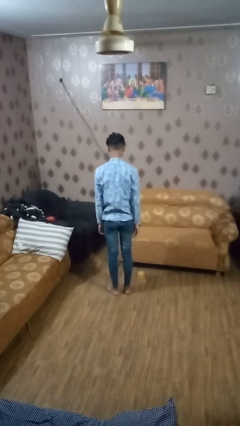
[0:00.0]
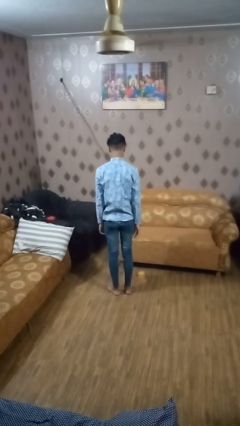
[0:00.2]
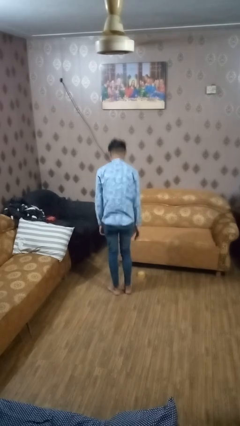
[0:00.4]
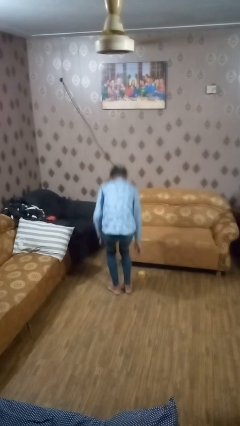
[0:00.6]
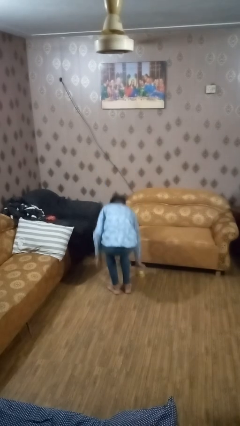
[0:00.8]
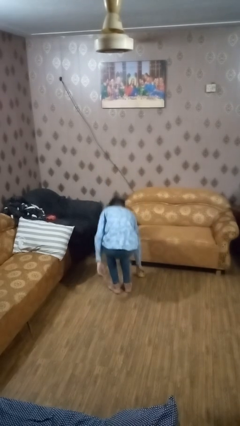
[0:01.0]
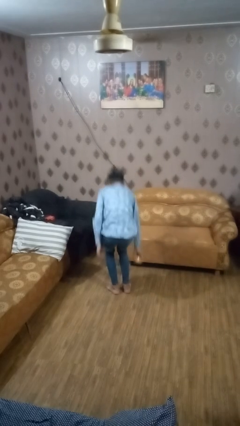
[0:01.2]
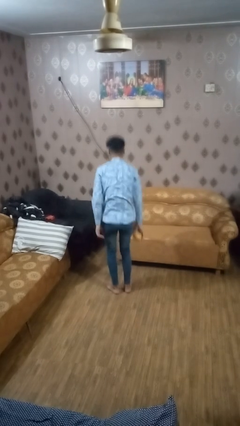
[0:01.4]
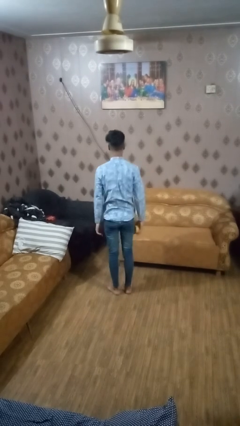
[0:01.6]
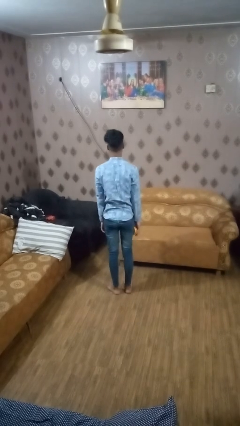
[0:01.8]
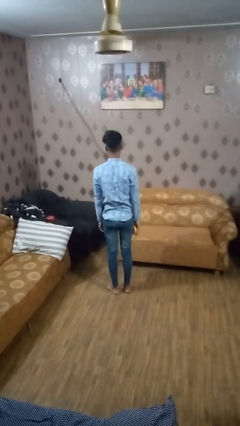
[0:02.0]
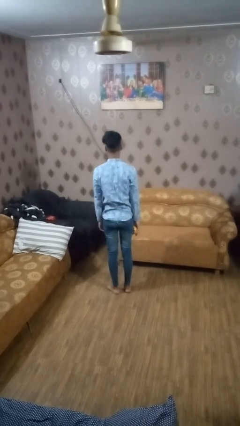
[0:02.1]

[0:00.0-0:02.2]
person picks up object from floor

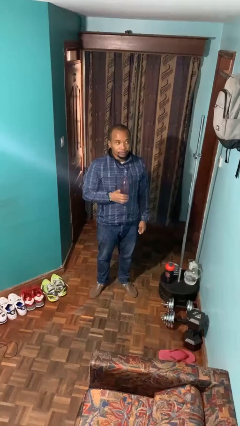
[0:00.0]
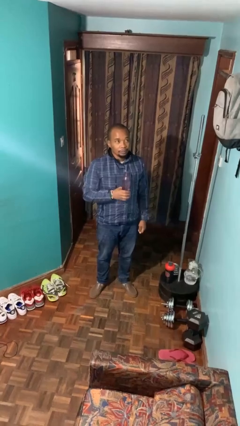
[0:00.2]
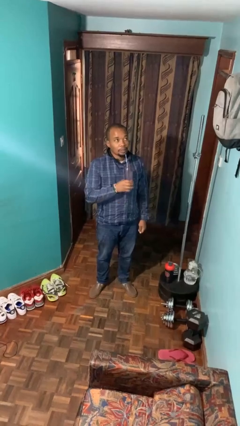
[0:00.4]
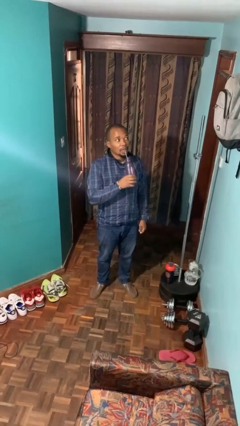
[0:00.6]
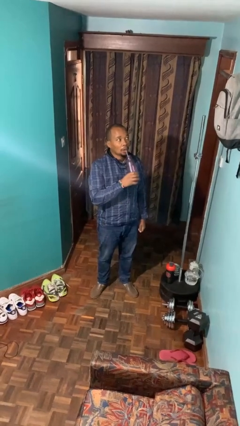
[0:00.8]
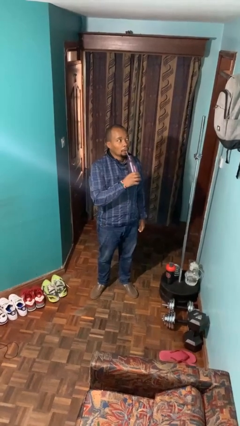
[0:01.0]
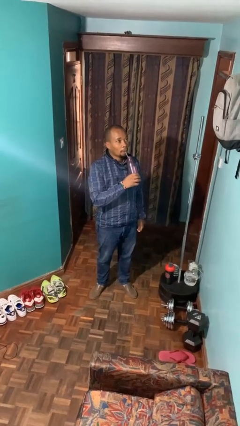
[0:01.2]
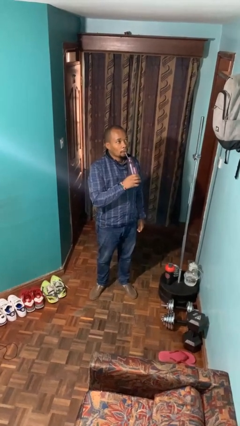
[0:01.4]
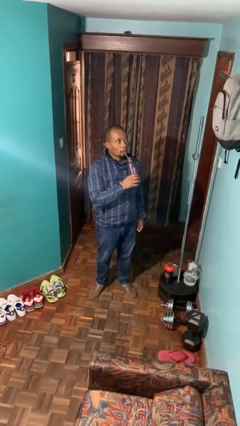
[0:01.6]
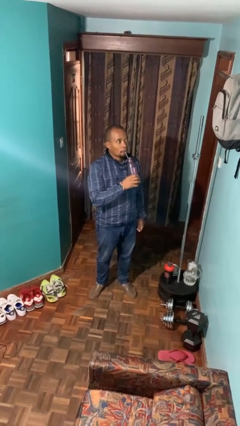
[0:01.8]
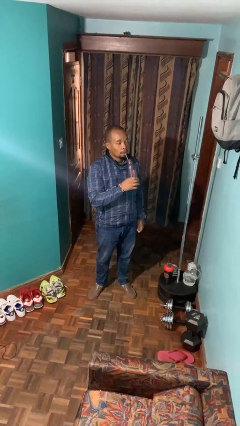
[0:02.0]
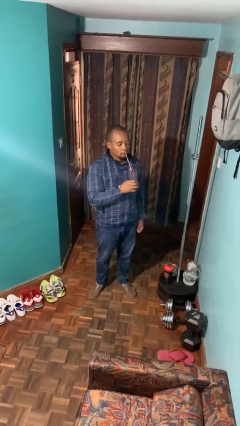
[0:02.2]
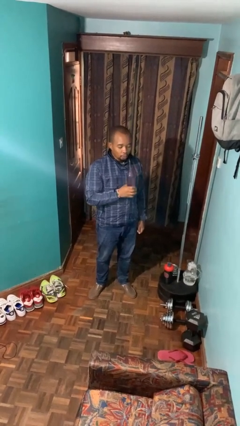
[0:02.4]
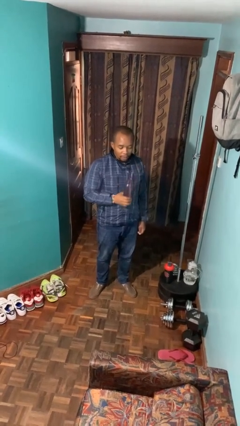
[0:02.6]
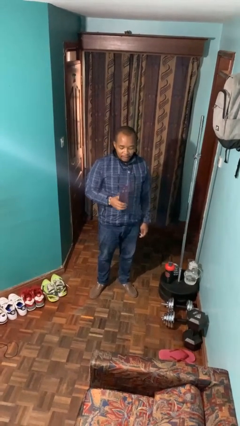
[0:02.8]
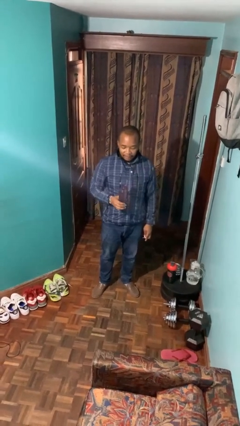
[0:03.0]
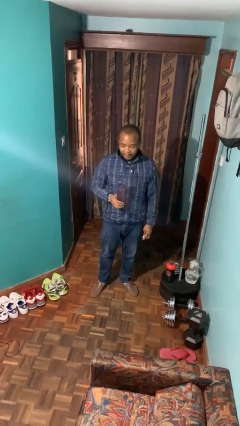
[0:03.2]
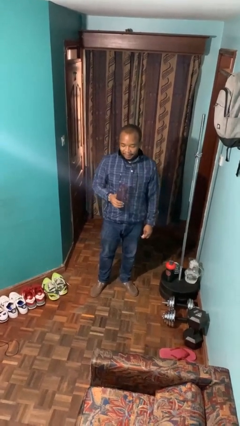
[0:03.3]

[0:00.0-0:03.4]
person drinks from straw

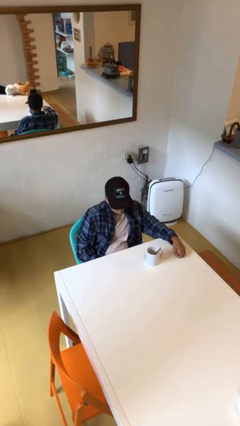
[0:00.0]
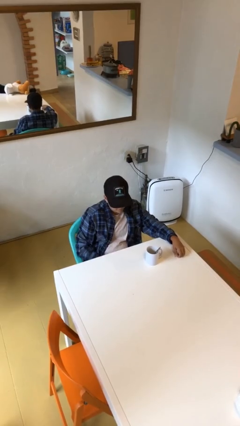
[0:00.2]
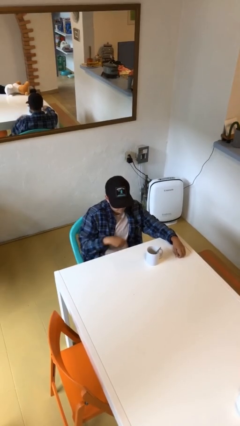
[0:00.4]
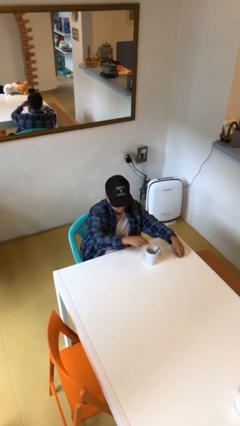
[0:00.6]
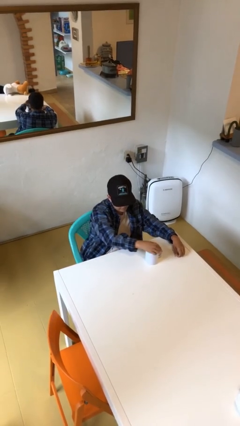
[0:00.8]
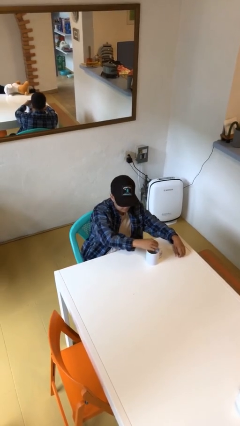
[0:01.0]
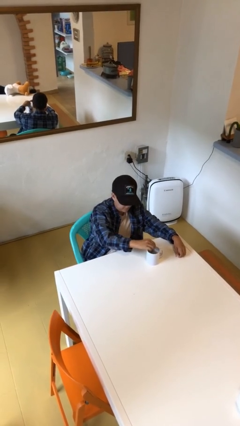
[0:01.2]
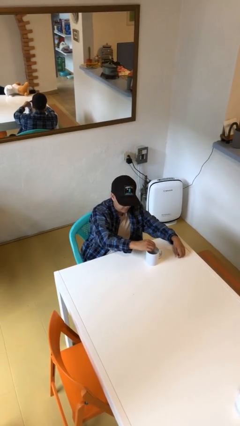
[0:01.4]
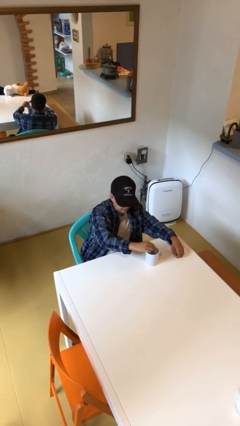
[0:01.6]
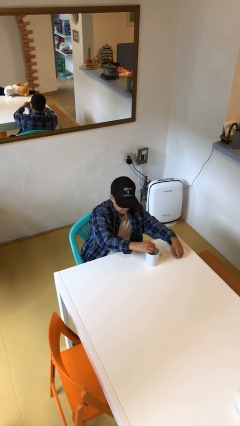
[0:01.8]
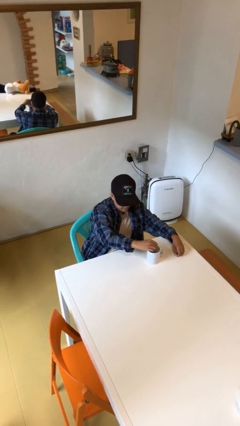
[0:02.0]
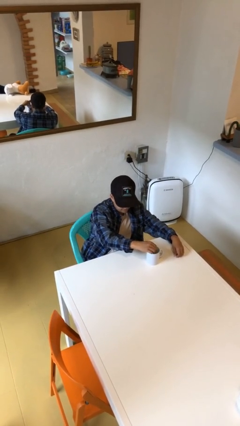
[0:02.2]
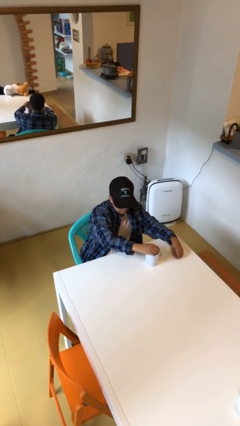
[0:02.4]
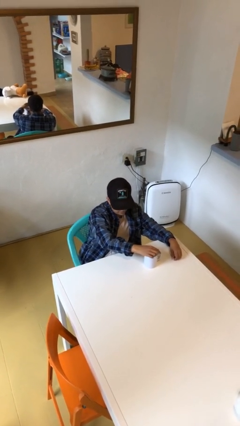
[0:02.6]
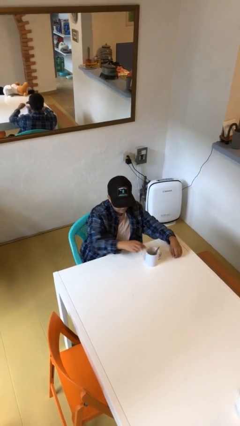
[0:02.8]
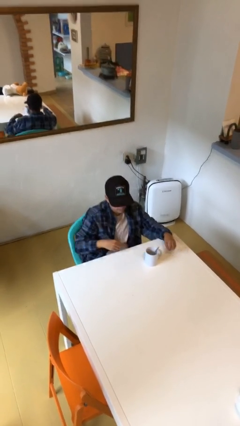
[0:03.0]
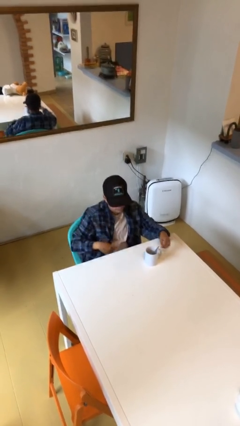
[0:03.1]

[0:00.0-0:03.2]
person stirs mug

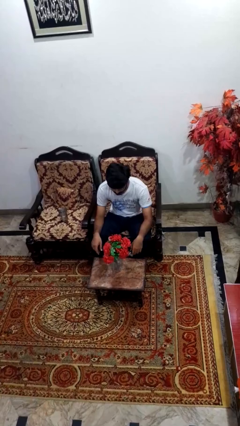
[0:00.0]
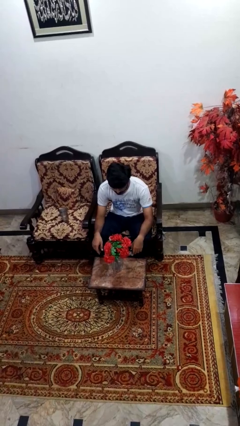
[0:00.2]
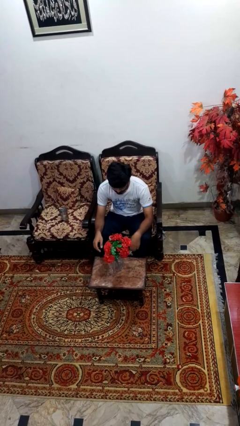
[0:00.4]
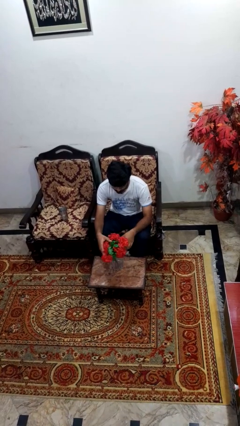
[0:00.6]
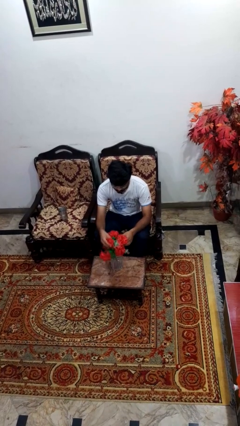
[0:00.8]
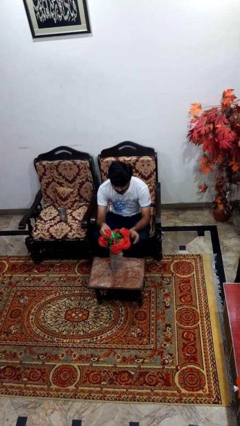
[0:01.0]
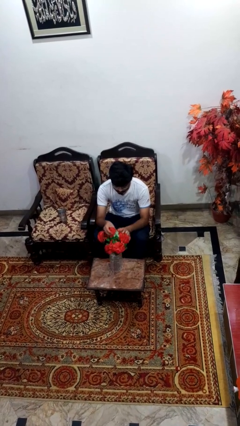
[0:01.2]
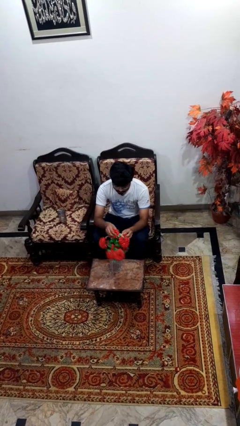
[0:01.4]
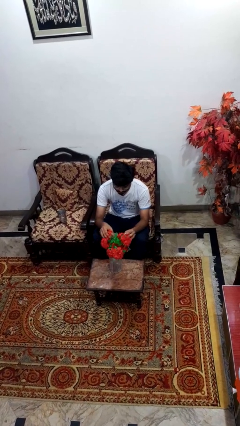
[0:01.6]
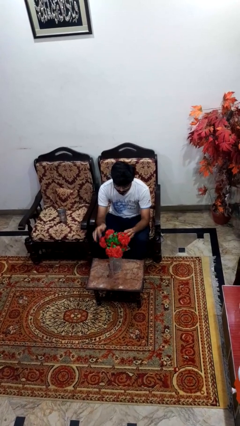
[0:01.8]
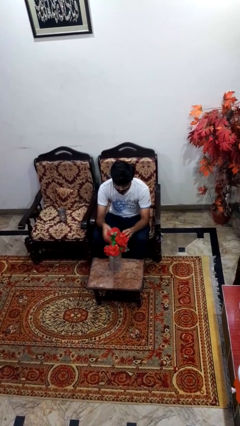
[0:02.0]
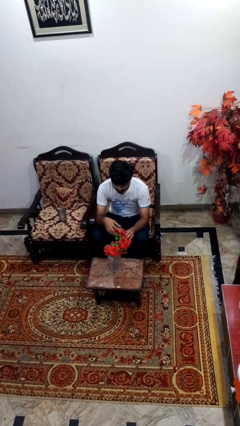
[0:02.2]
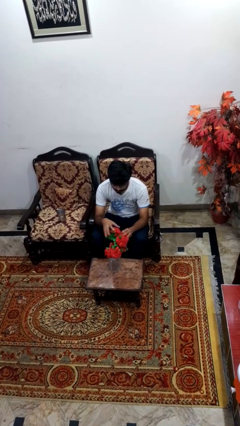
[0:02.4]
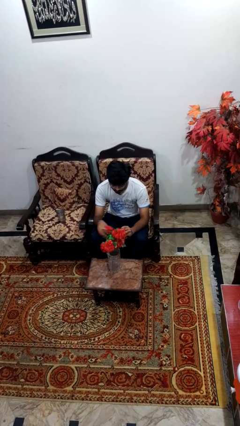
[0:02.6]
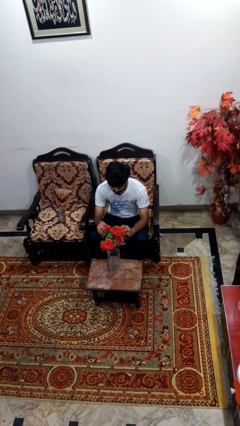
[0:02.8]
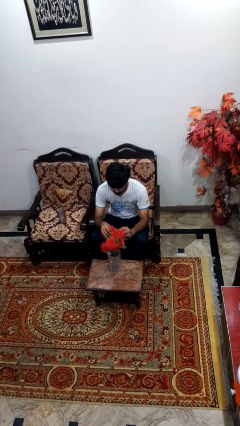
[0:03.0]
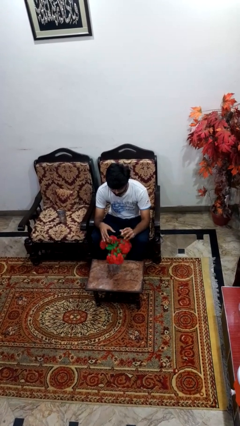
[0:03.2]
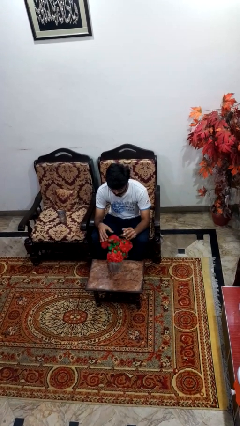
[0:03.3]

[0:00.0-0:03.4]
person arranges flowers in vase

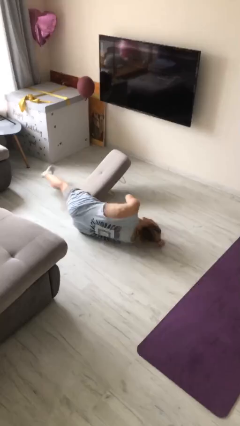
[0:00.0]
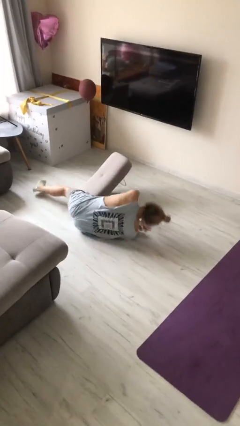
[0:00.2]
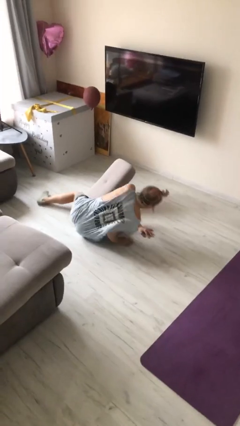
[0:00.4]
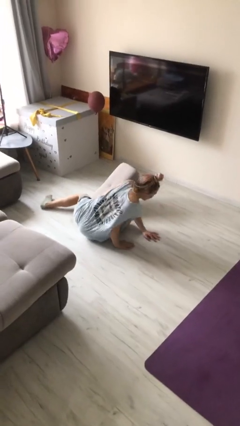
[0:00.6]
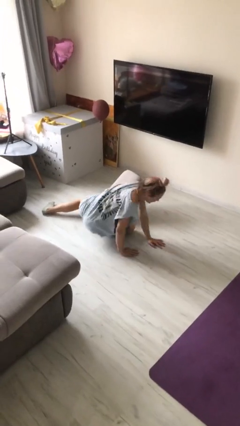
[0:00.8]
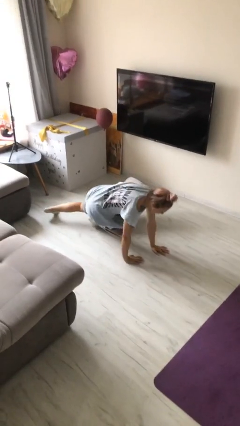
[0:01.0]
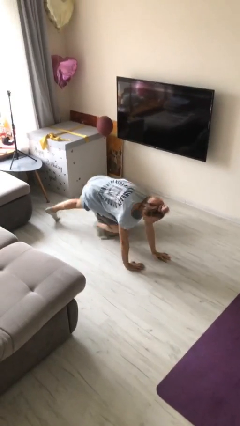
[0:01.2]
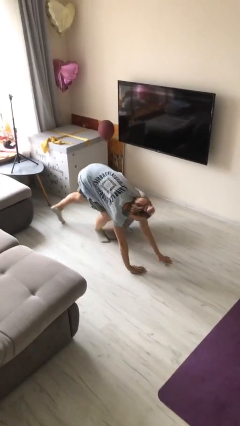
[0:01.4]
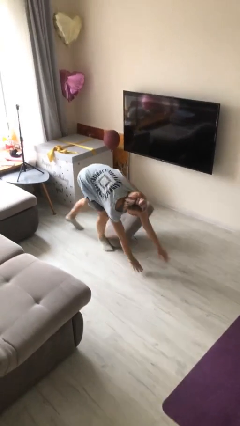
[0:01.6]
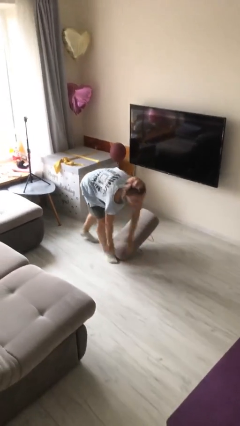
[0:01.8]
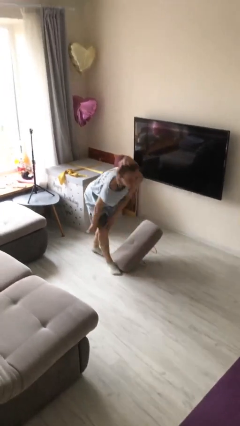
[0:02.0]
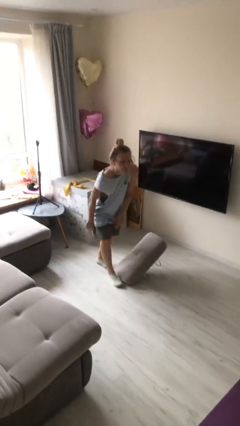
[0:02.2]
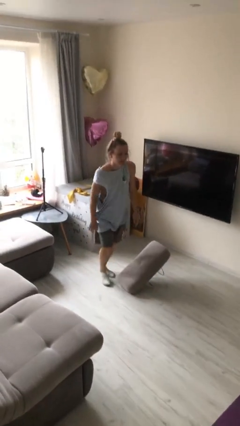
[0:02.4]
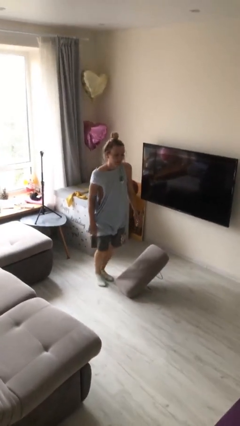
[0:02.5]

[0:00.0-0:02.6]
person stands up from floor

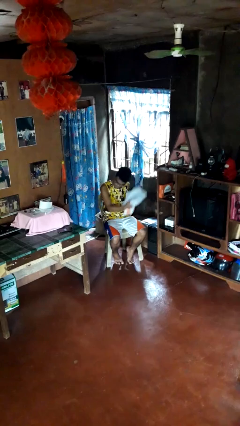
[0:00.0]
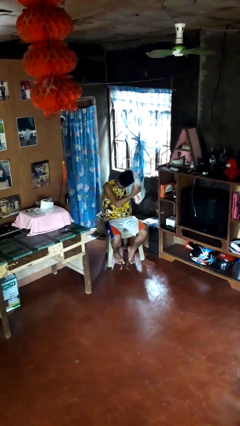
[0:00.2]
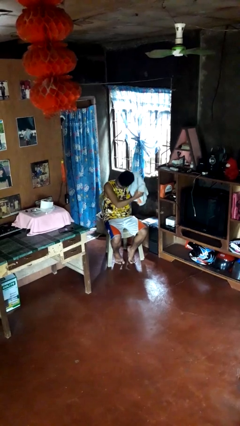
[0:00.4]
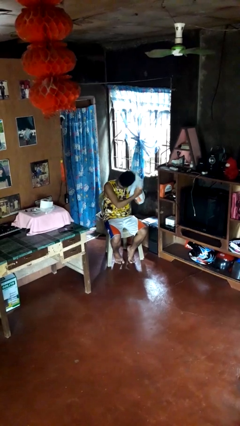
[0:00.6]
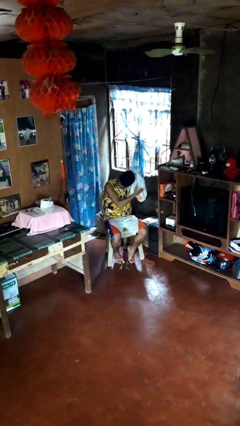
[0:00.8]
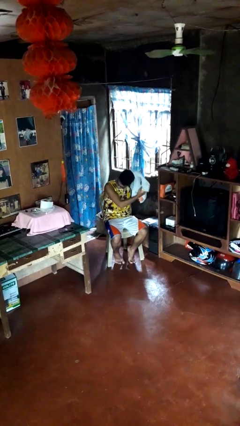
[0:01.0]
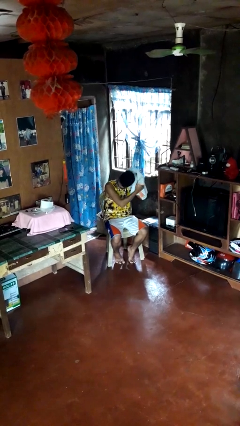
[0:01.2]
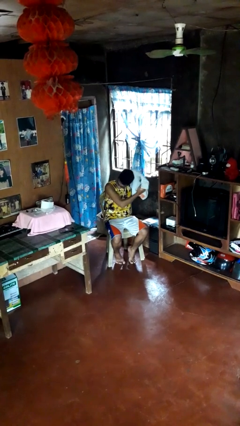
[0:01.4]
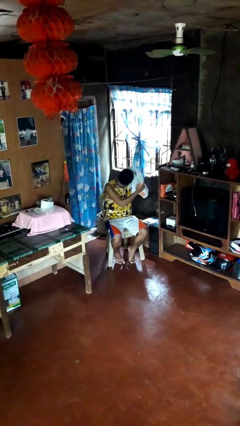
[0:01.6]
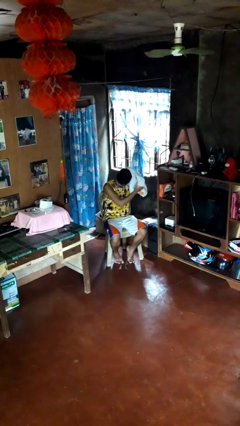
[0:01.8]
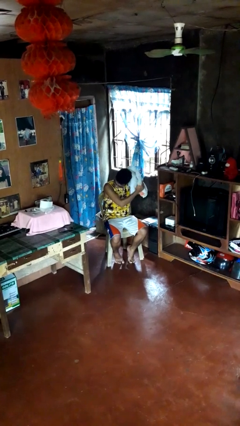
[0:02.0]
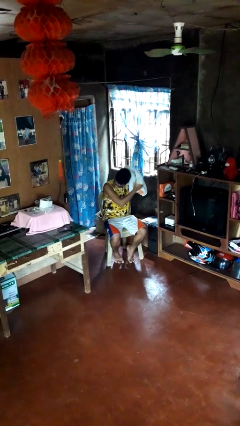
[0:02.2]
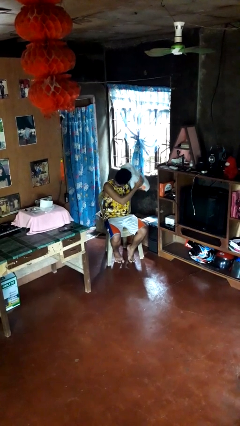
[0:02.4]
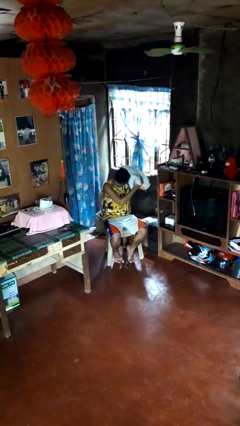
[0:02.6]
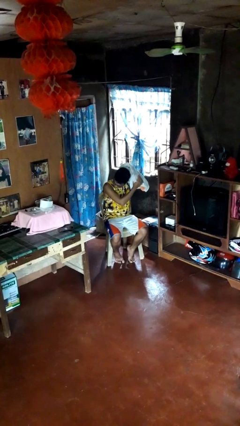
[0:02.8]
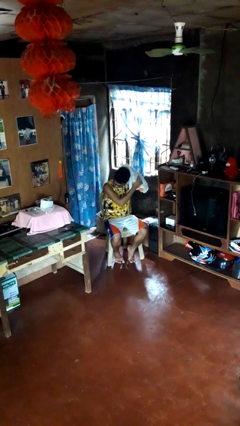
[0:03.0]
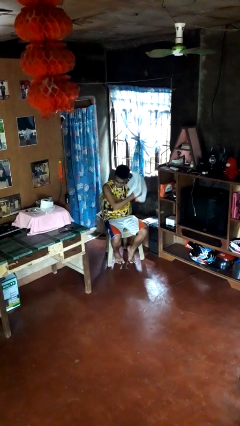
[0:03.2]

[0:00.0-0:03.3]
person dries hair with towel
